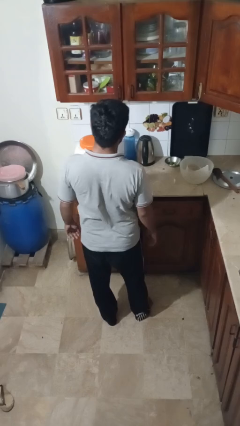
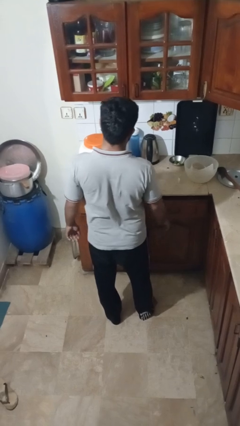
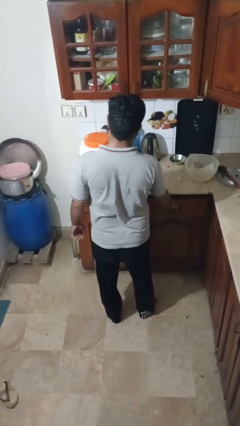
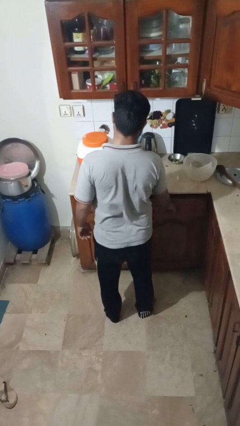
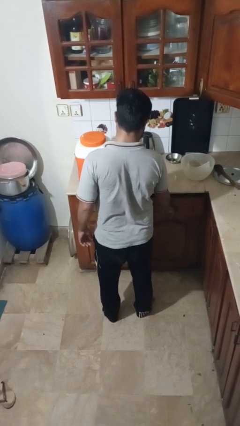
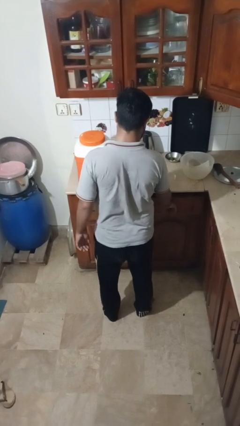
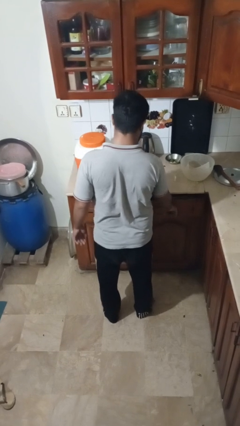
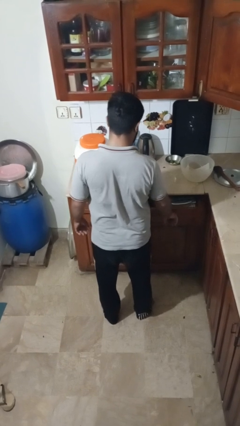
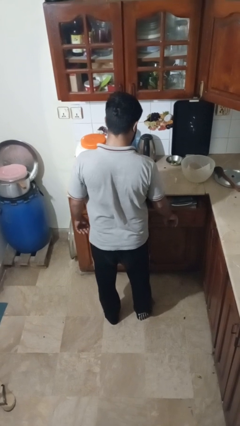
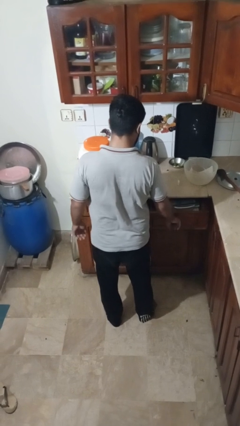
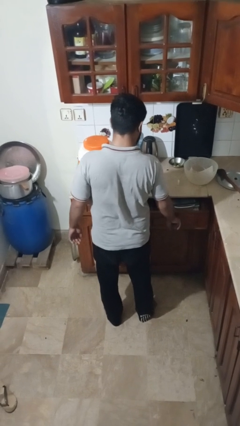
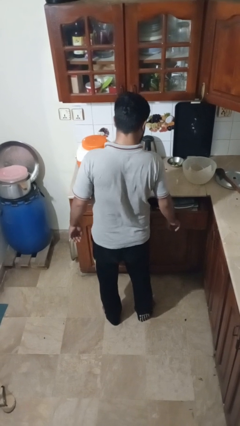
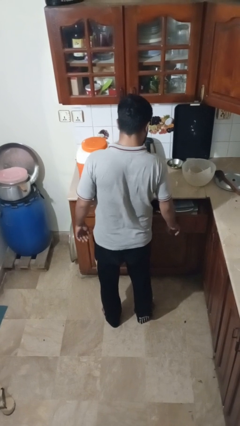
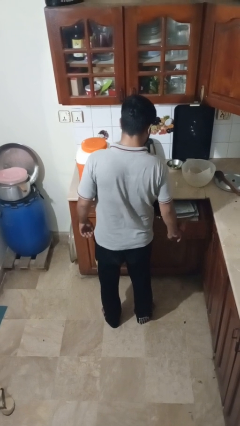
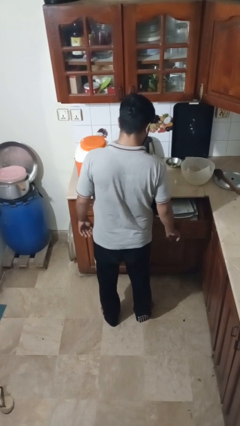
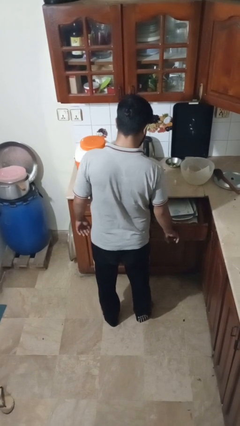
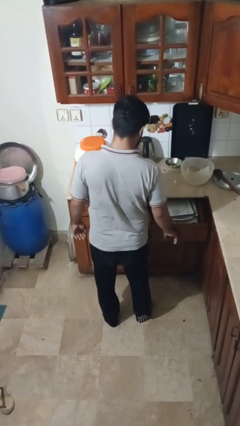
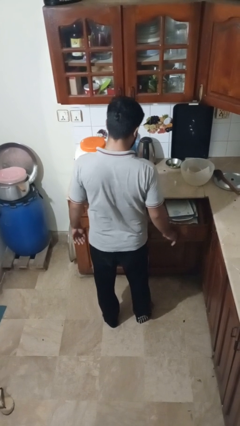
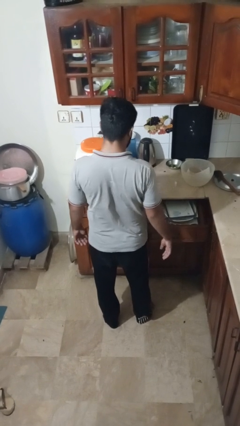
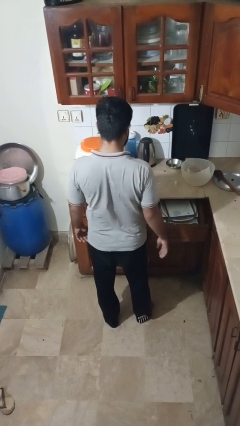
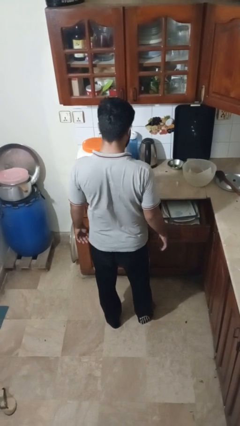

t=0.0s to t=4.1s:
person opens kitchen drawer

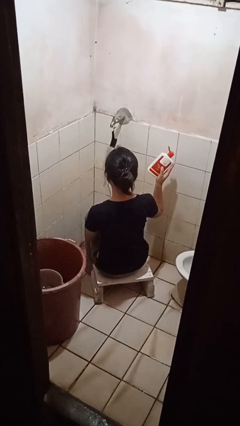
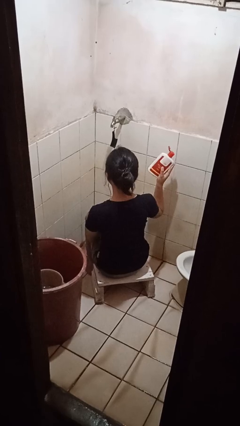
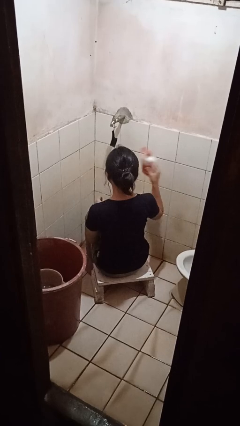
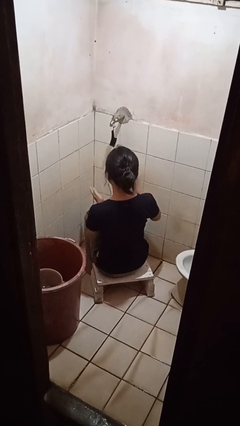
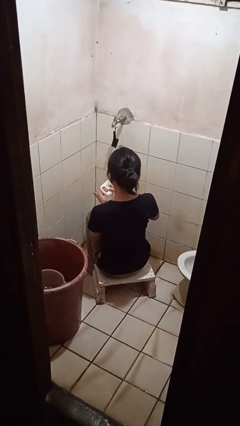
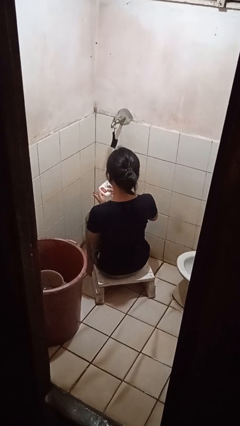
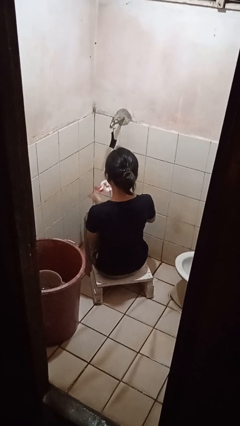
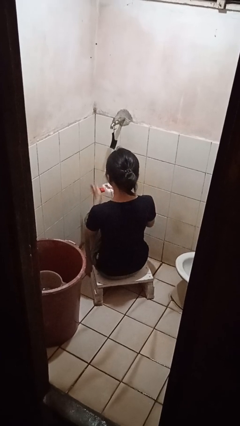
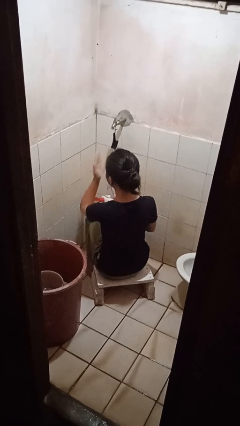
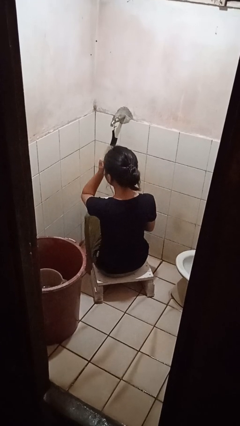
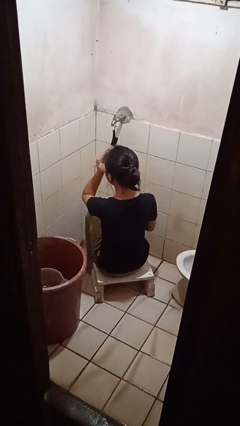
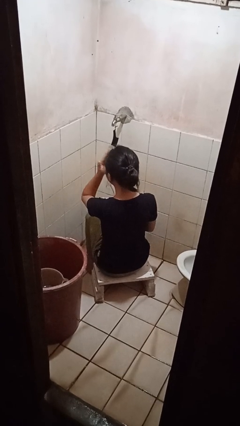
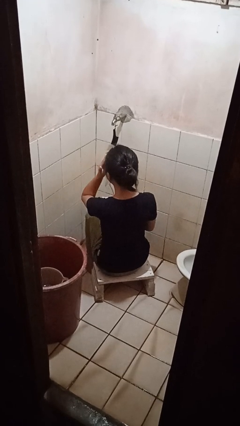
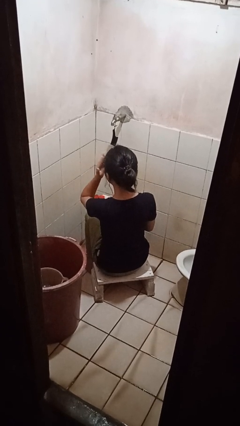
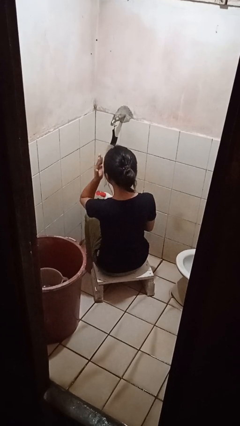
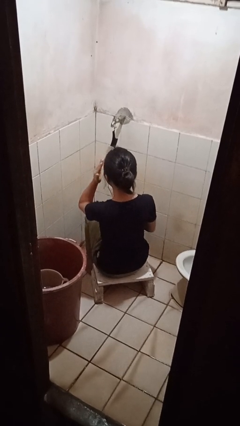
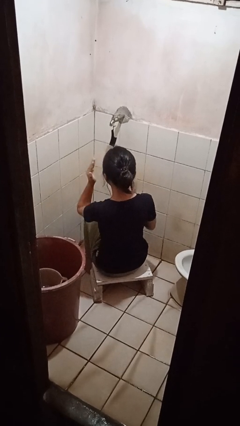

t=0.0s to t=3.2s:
person applies facial moisturizer

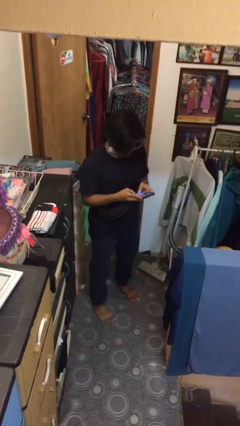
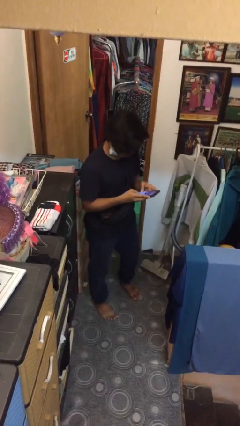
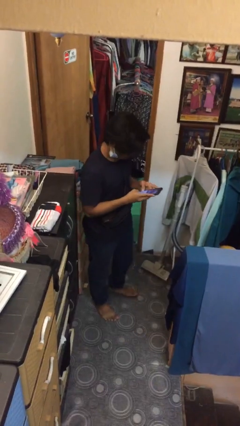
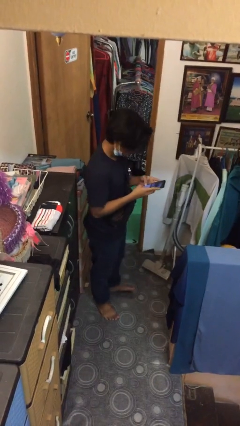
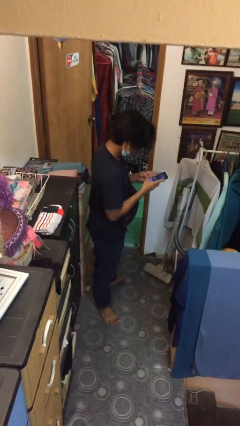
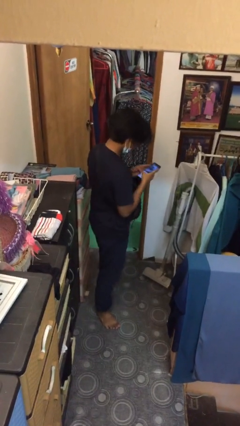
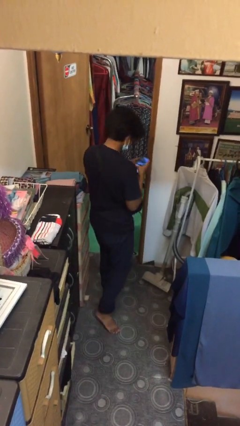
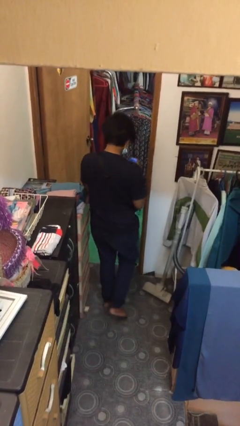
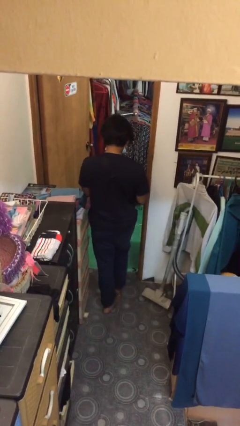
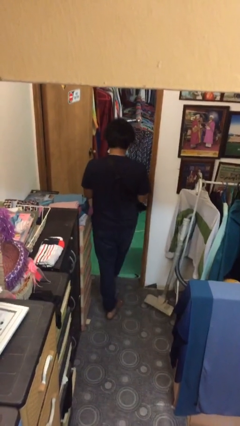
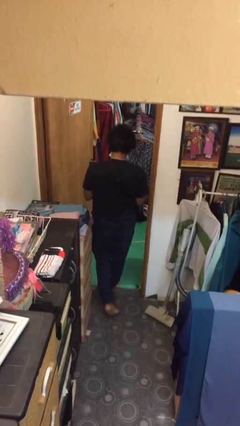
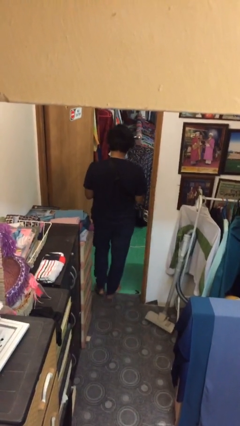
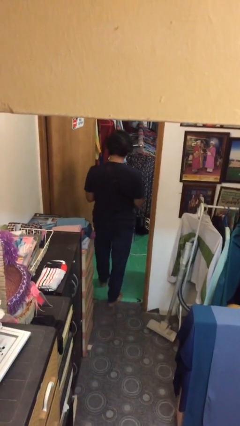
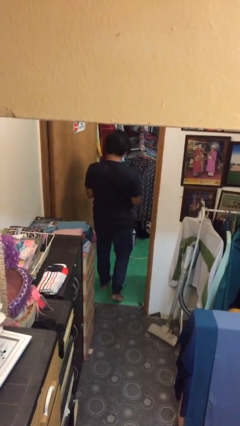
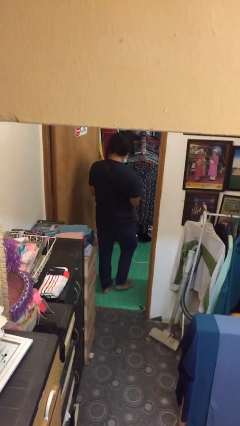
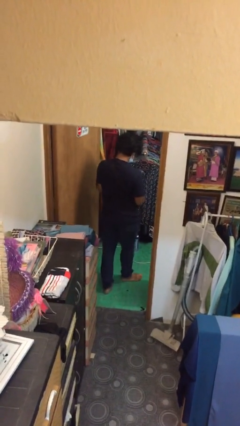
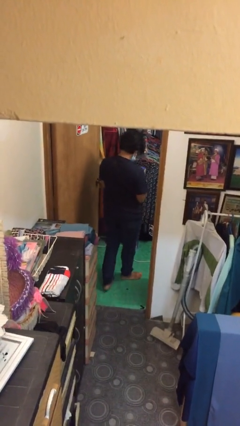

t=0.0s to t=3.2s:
person exits scene through structure

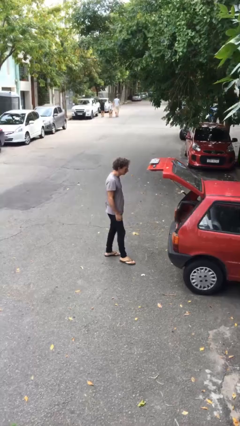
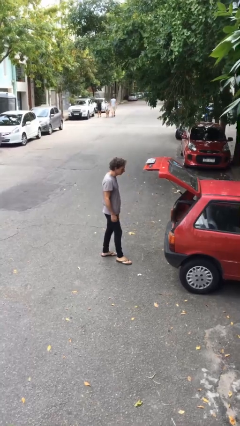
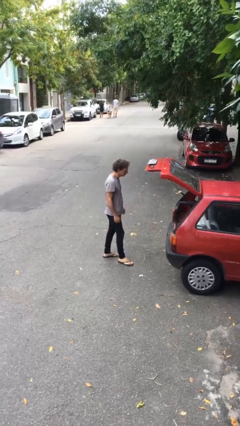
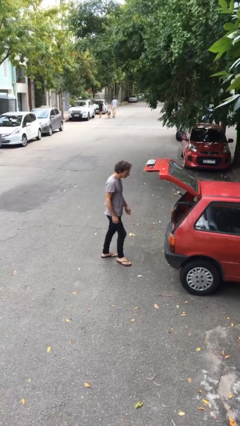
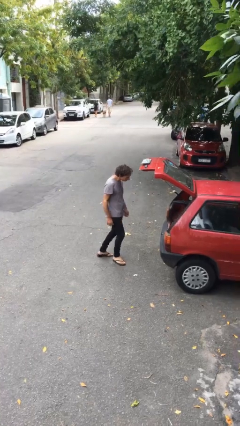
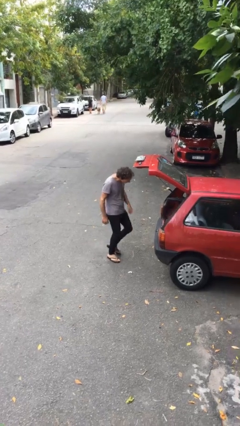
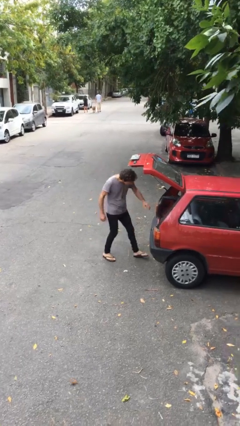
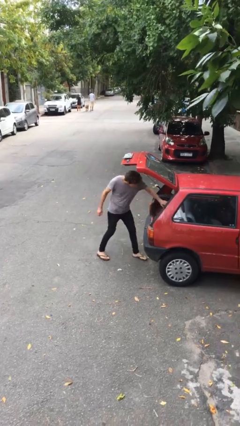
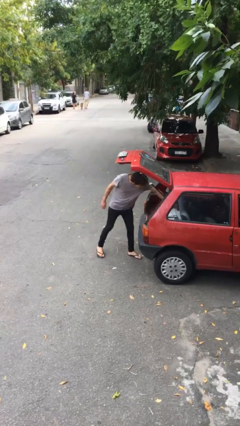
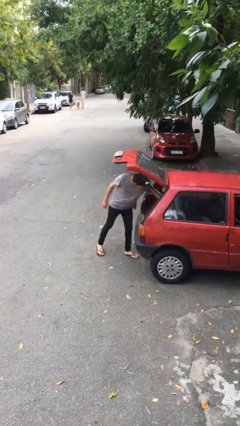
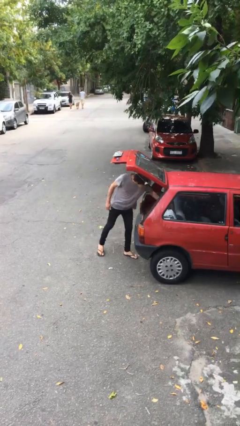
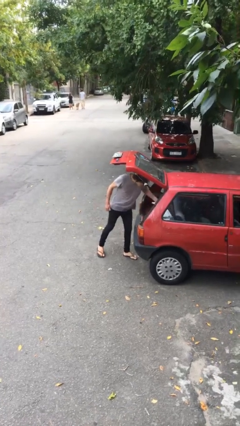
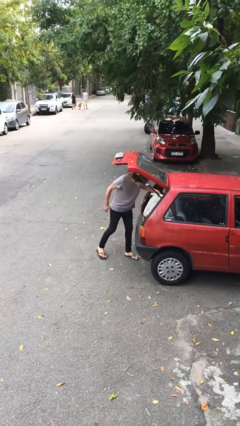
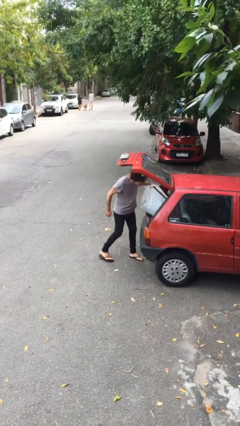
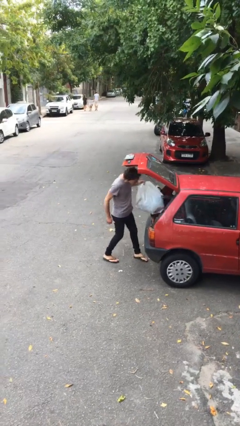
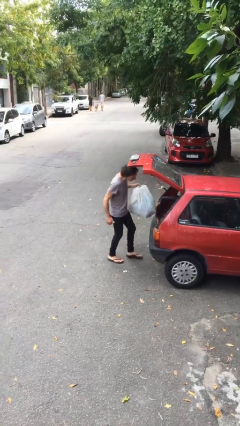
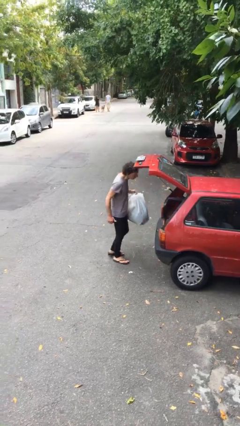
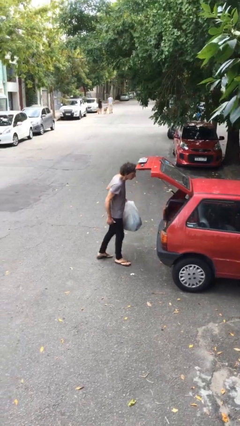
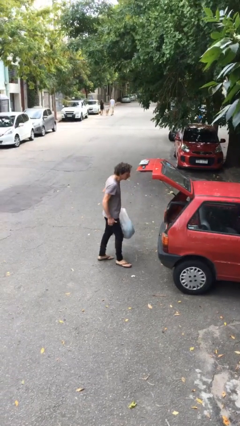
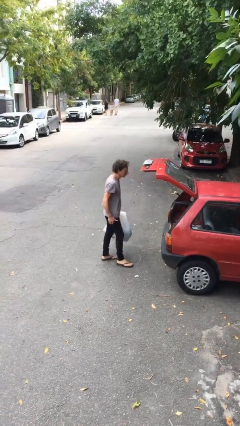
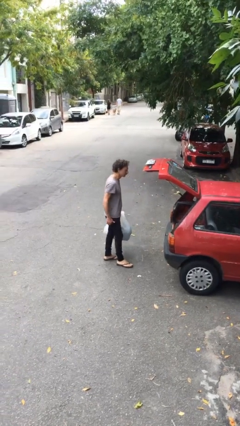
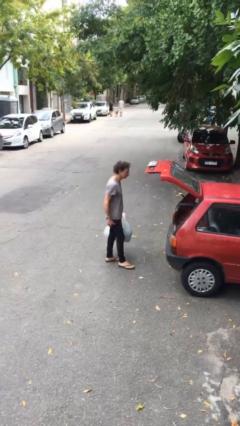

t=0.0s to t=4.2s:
person unloads car

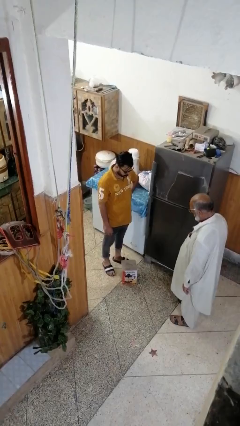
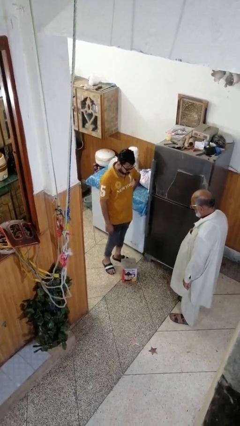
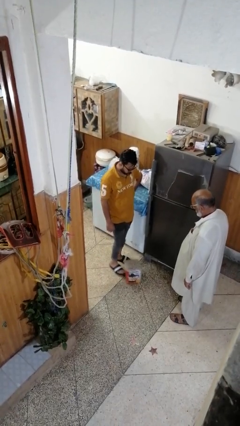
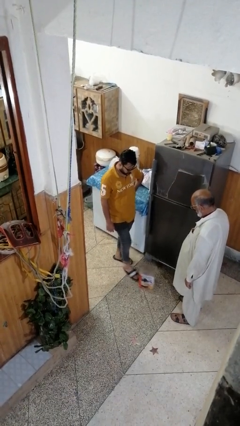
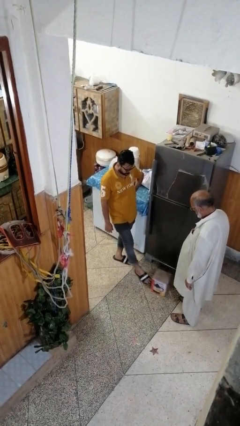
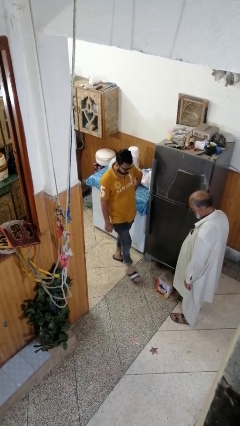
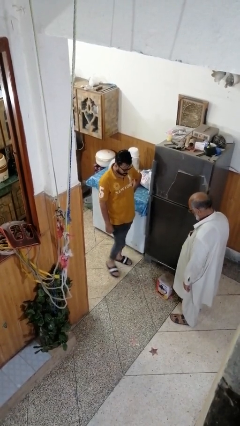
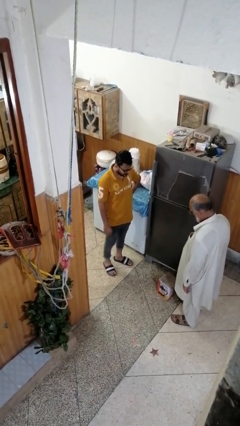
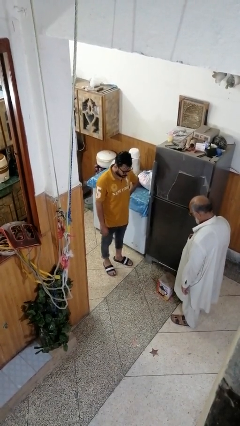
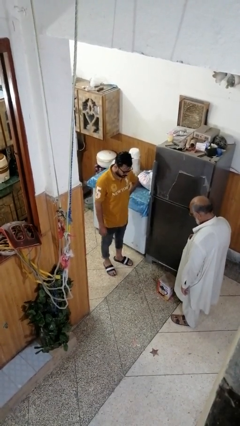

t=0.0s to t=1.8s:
person kicks object to person

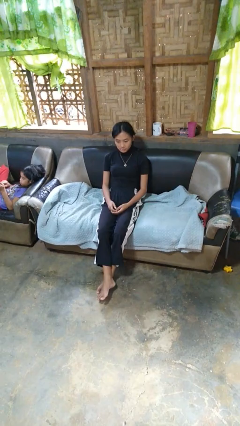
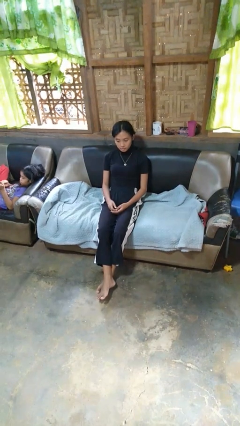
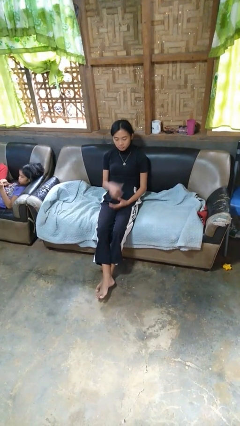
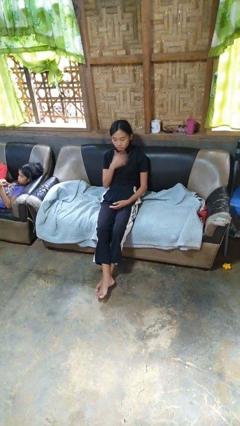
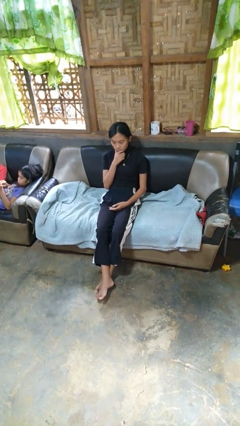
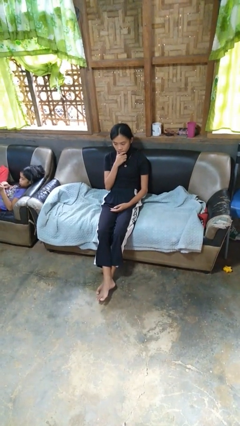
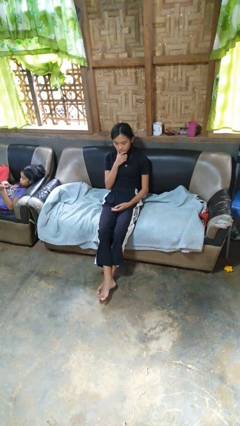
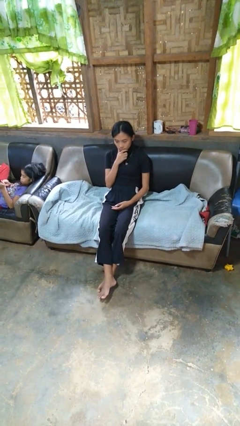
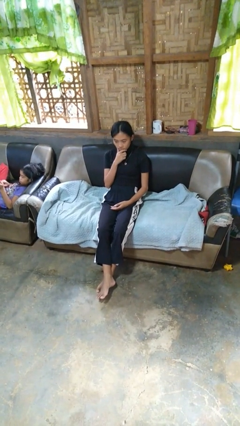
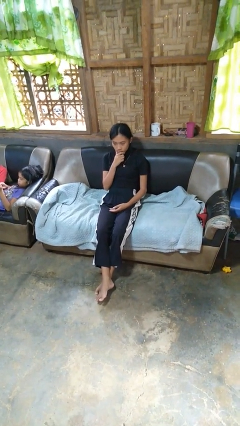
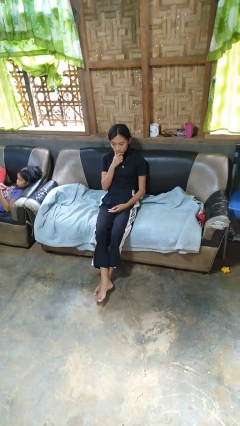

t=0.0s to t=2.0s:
person strokes chin
